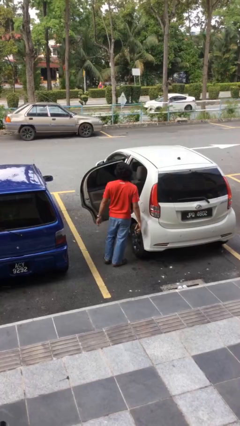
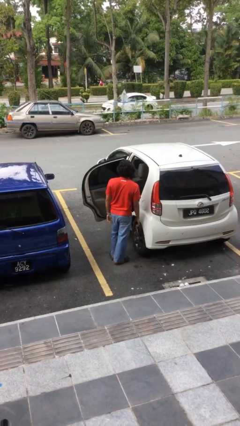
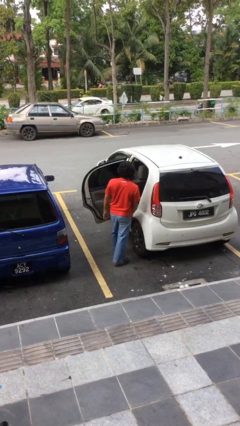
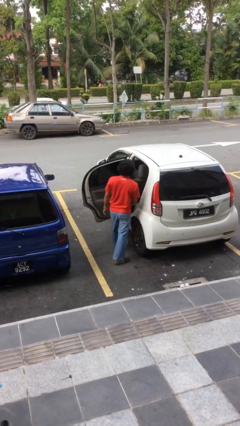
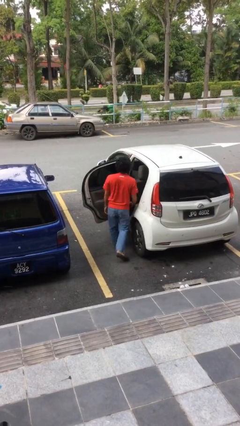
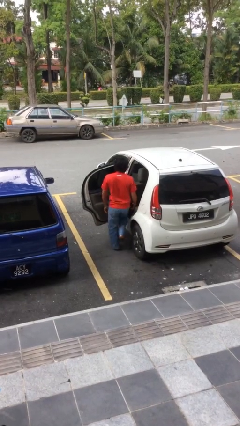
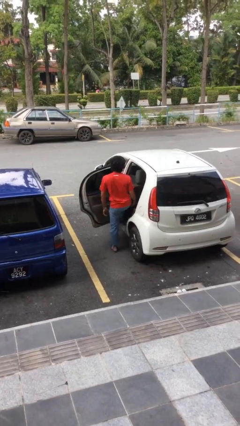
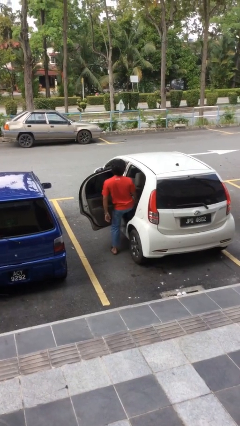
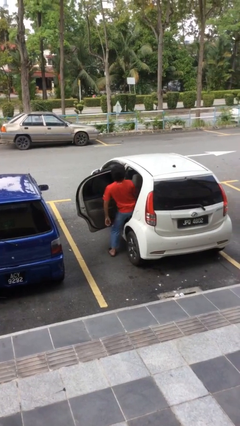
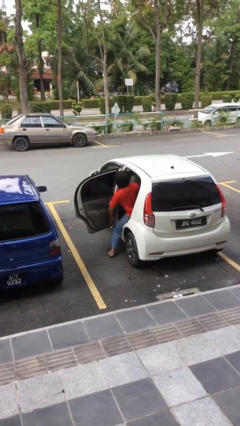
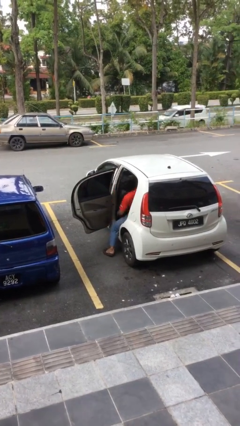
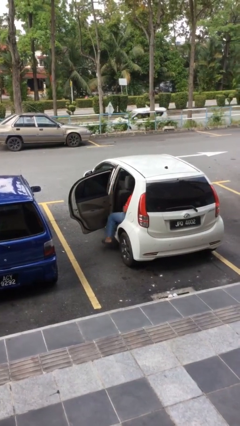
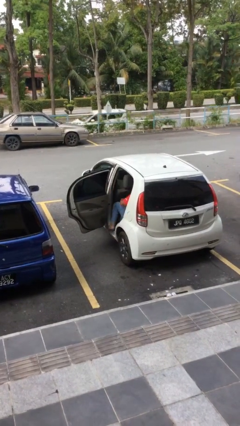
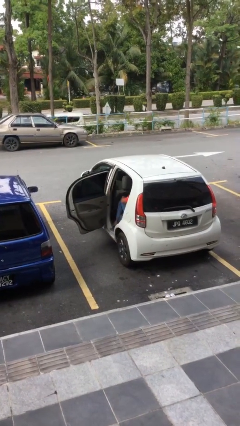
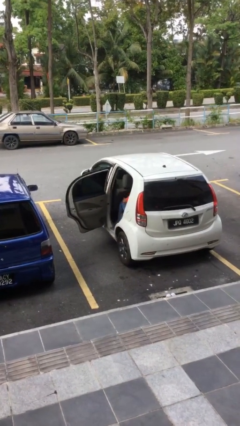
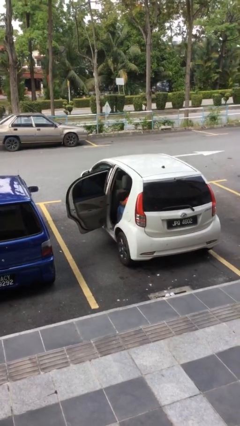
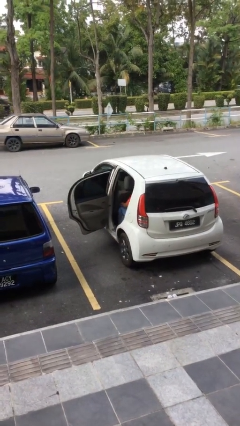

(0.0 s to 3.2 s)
person enters car

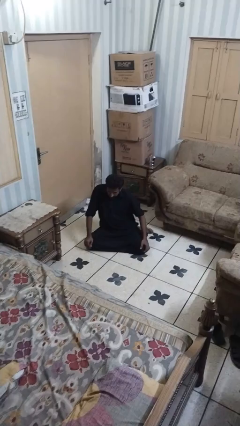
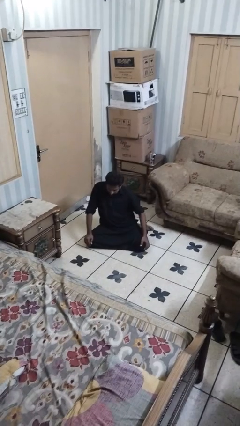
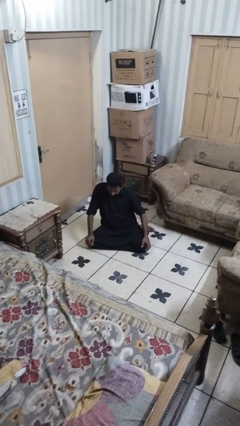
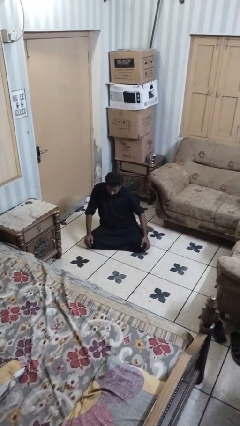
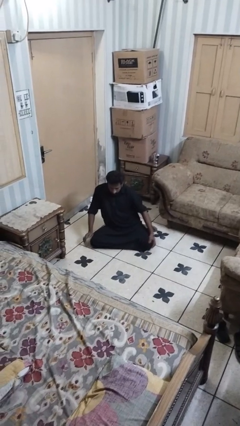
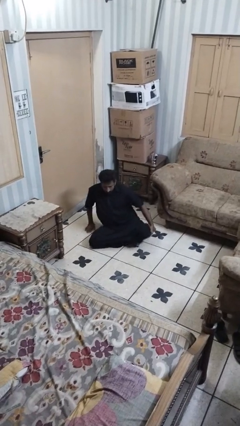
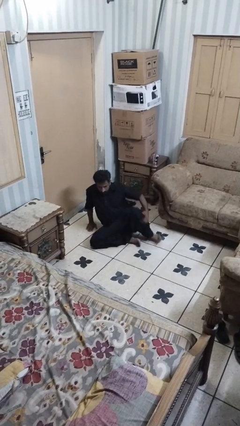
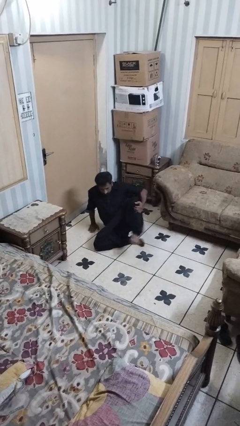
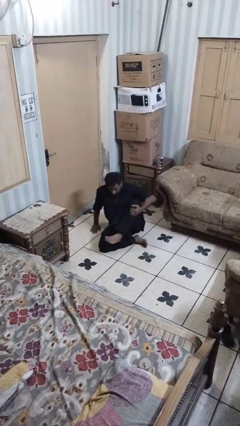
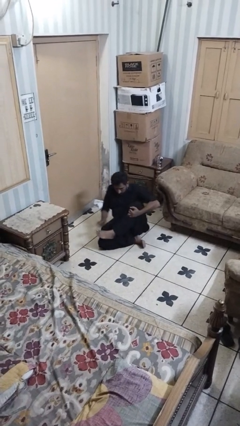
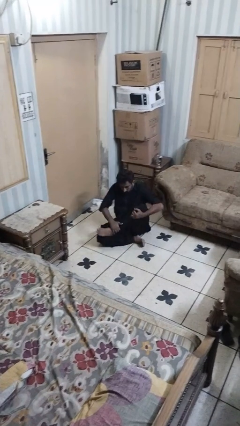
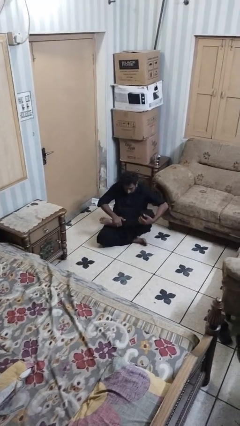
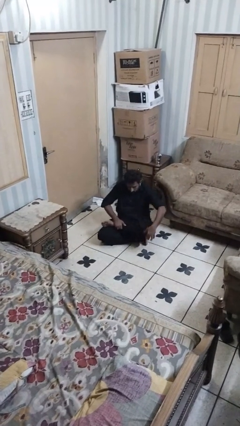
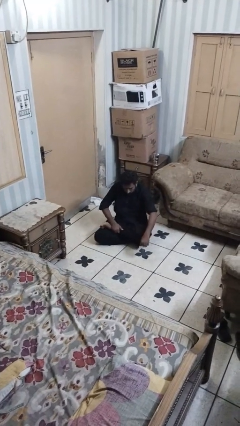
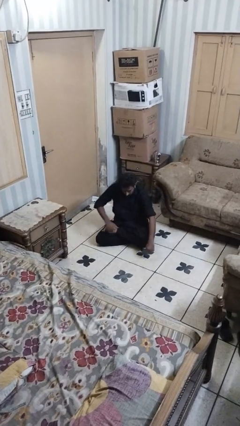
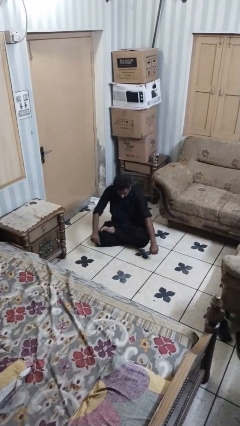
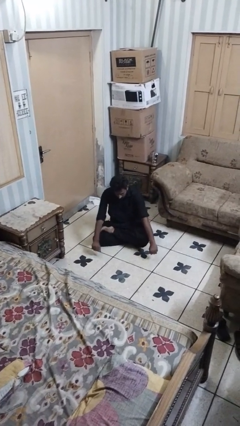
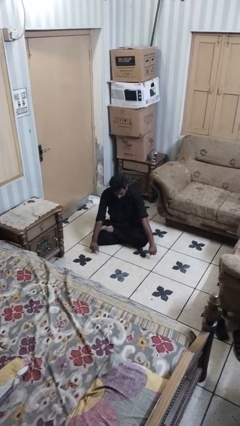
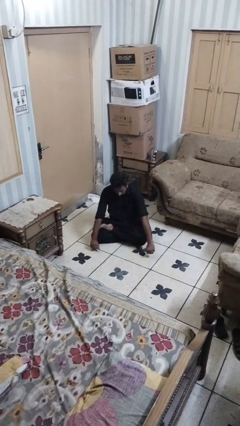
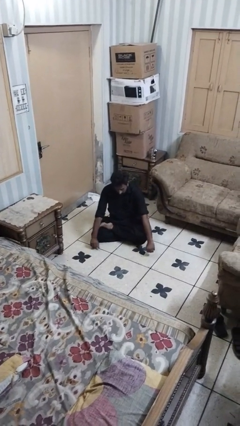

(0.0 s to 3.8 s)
person crosses legs

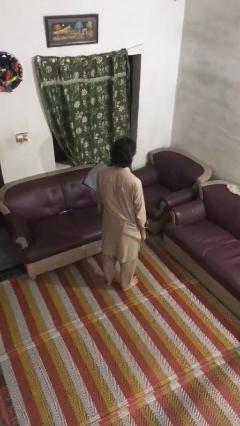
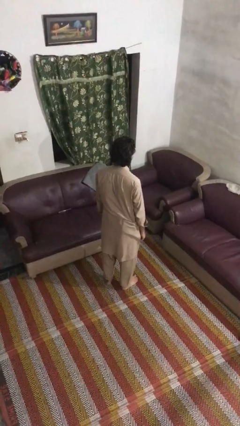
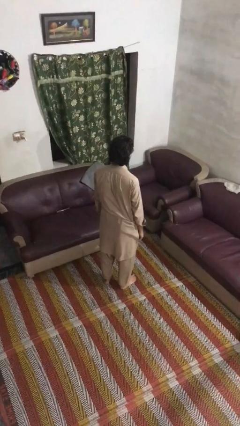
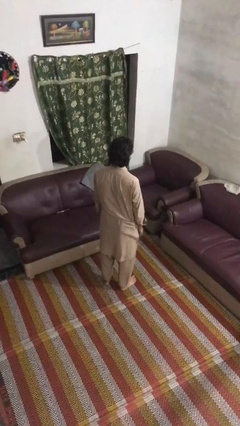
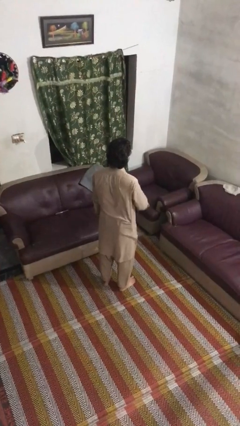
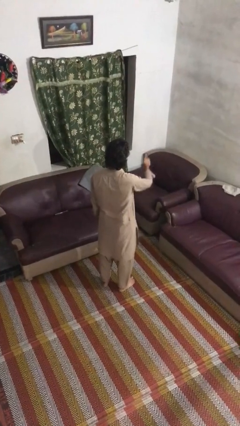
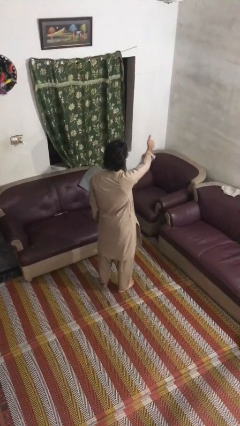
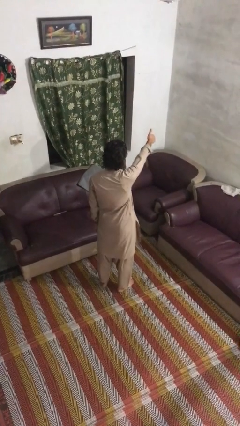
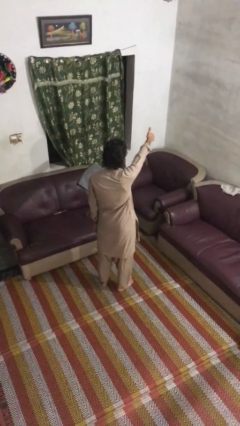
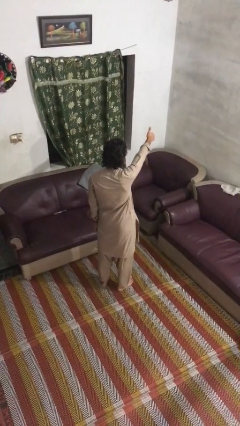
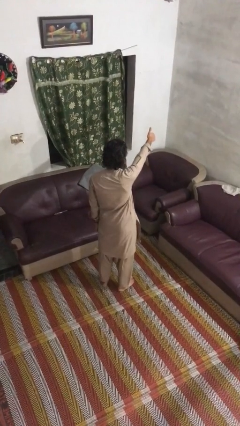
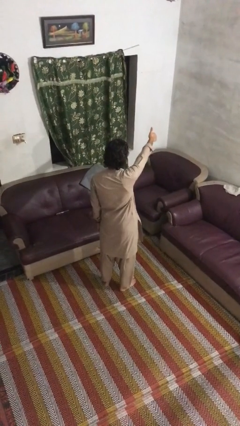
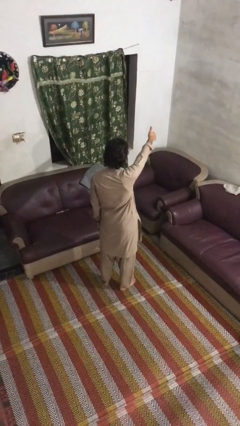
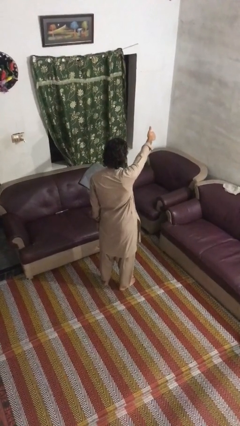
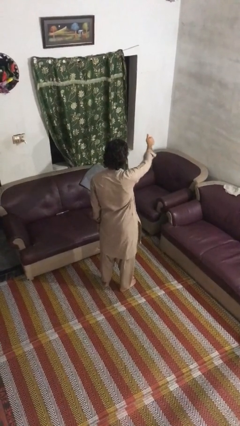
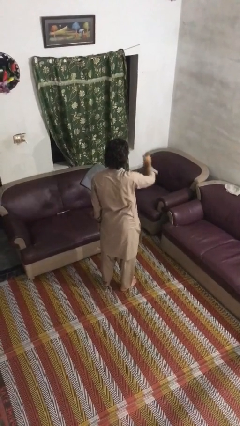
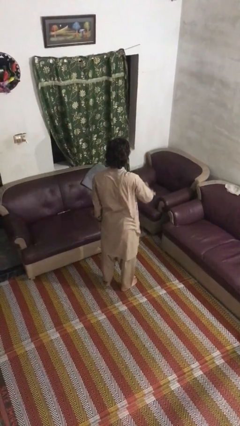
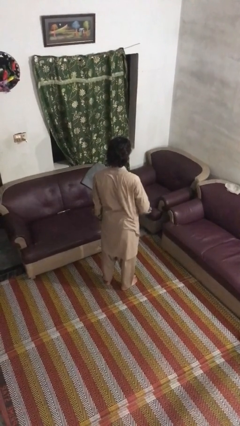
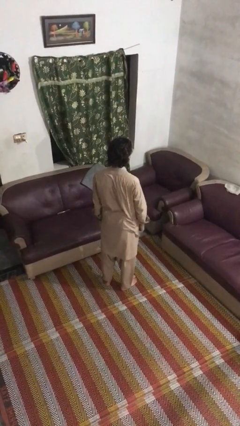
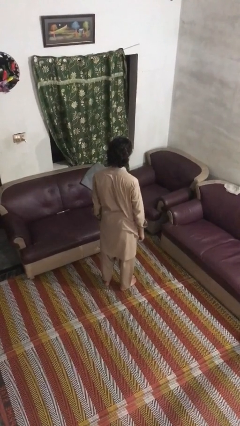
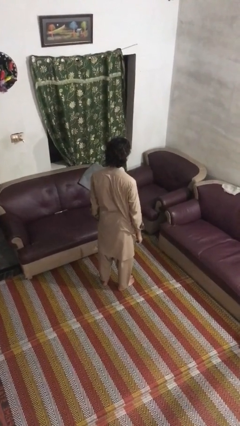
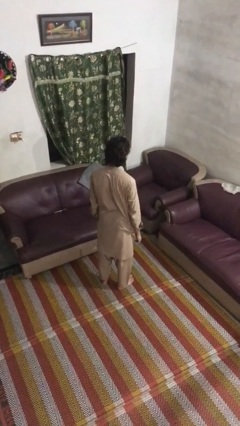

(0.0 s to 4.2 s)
person gestures thumbs up

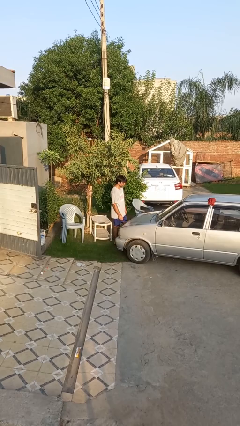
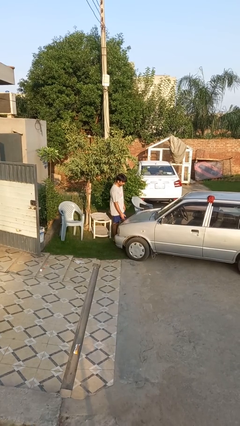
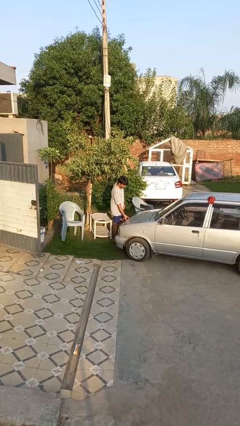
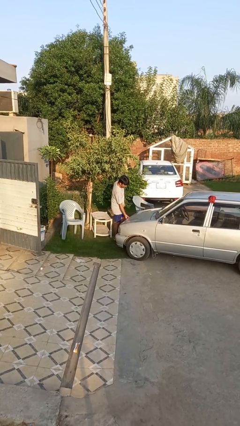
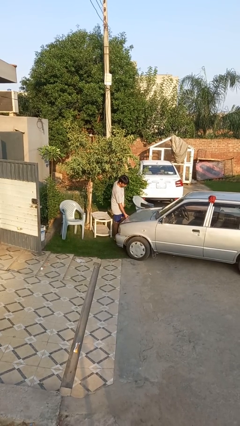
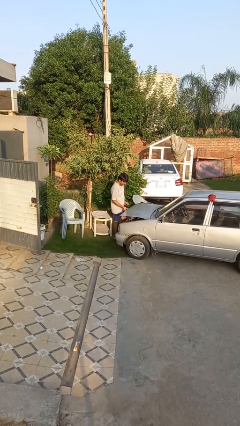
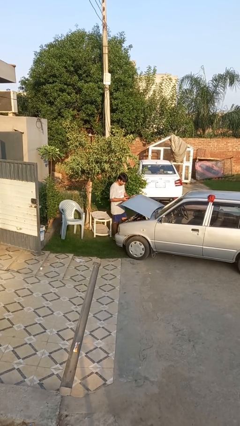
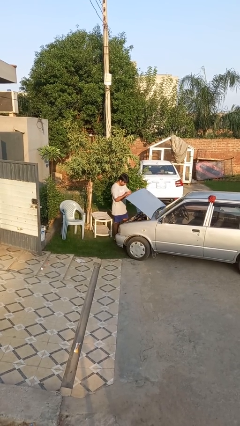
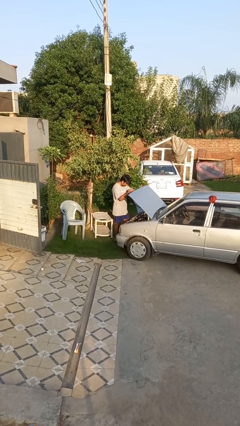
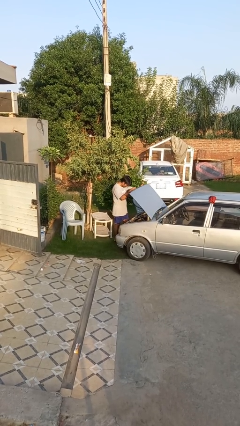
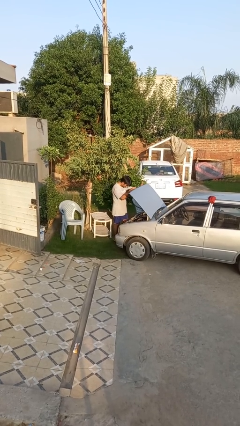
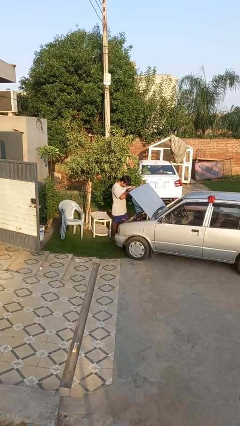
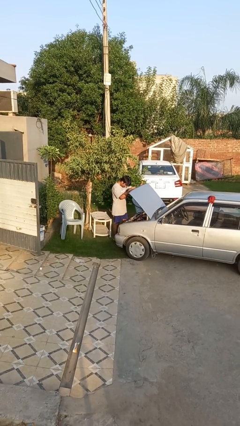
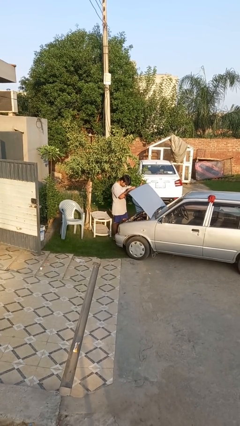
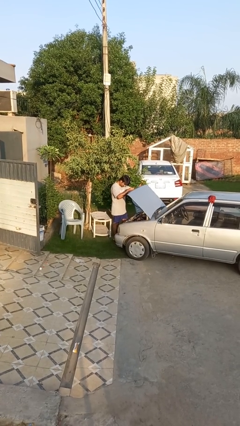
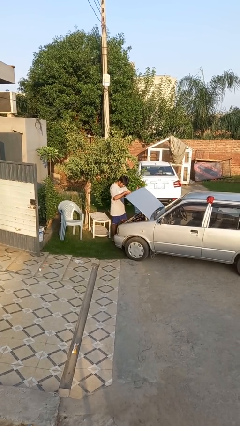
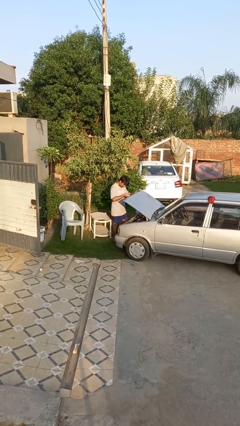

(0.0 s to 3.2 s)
person opens car hood

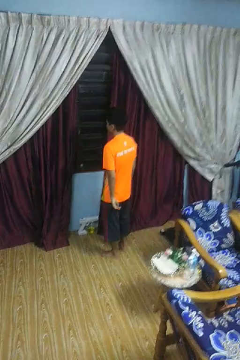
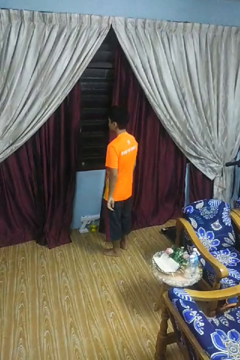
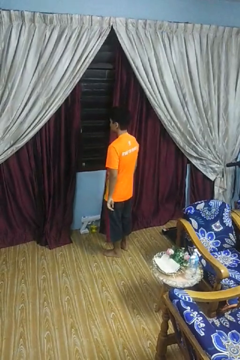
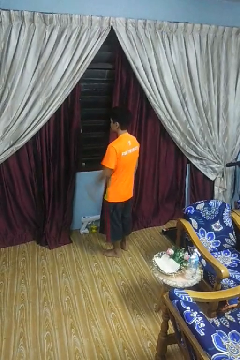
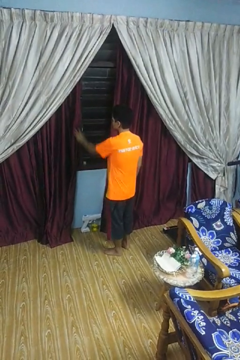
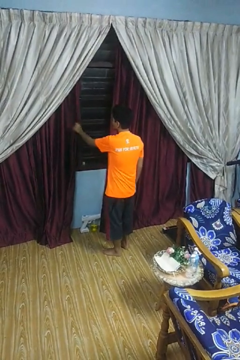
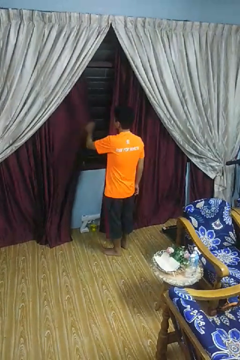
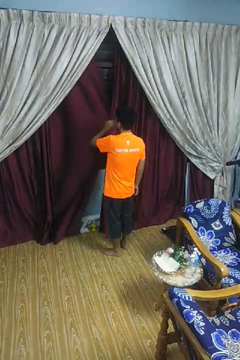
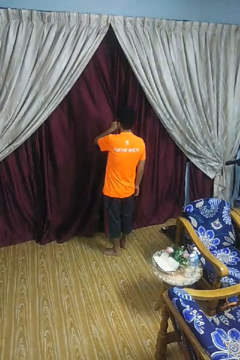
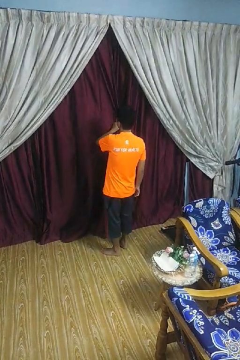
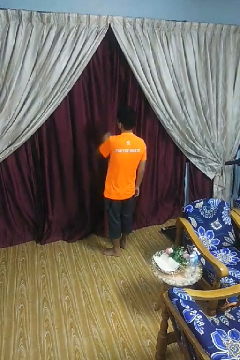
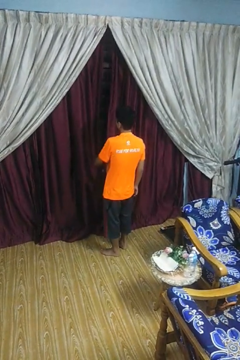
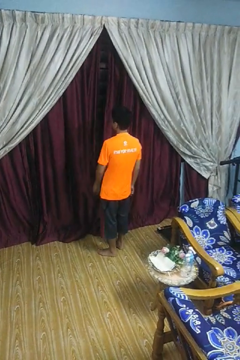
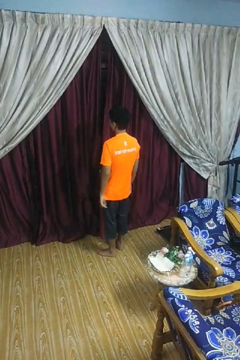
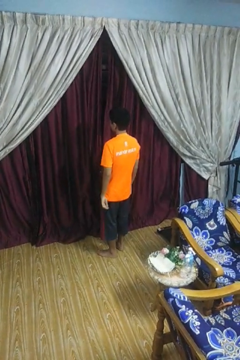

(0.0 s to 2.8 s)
person closes curtains

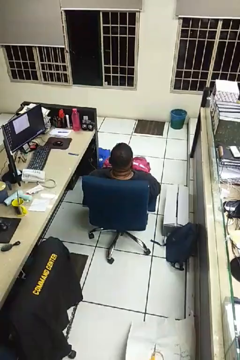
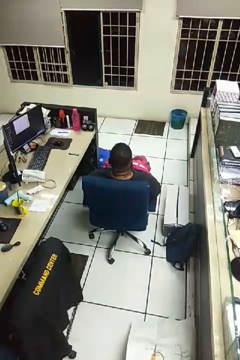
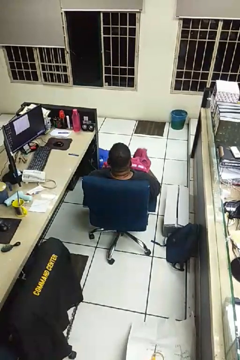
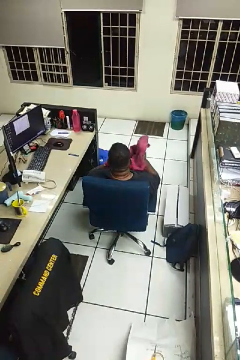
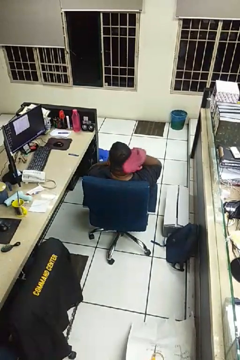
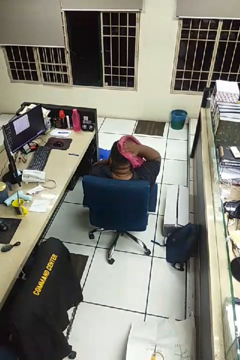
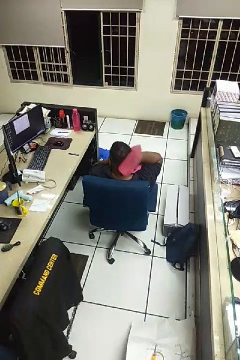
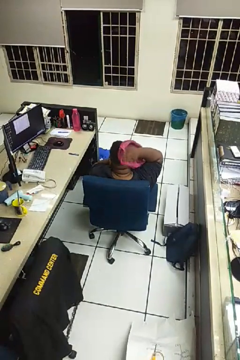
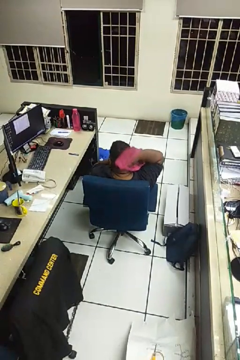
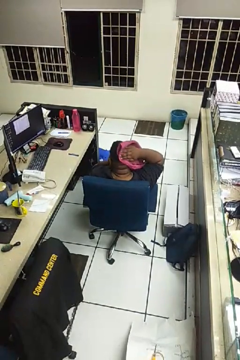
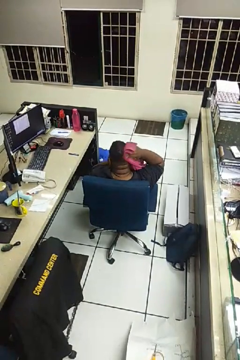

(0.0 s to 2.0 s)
person dries hair with towel
